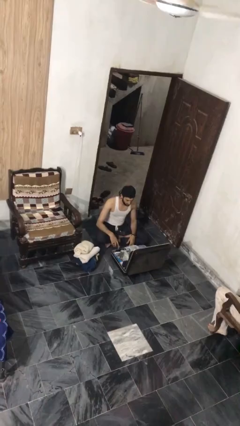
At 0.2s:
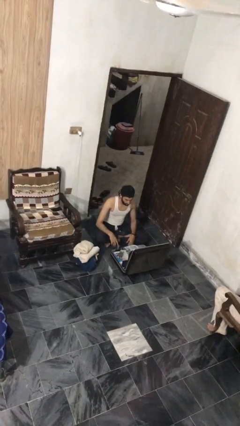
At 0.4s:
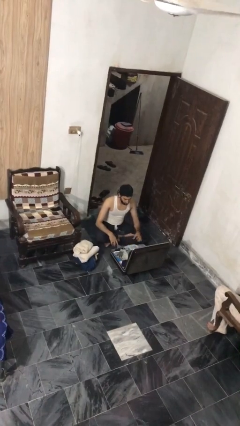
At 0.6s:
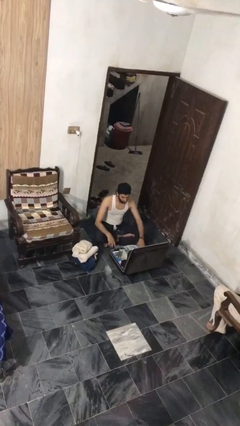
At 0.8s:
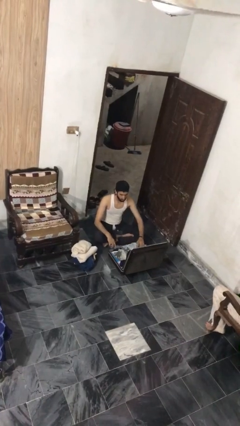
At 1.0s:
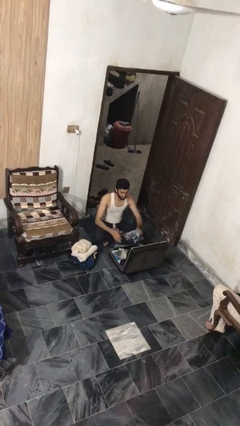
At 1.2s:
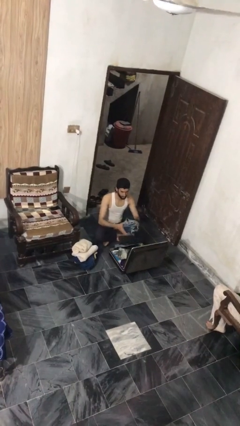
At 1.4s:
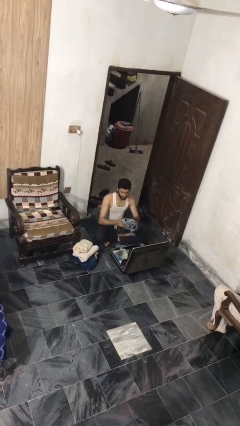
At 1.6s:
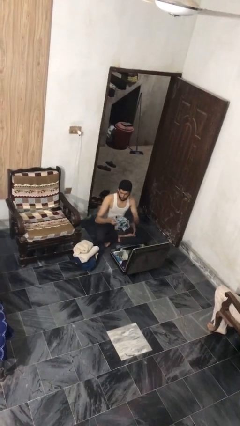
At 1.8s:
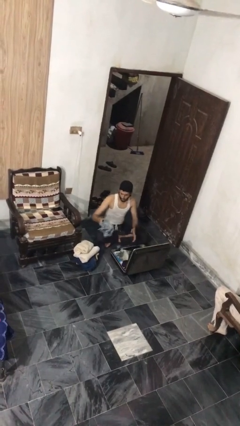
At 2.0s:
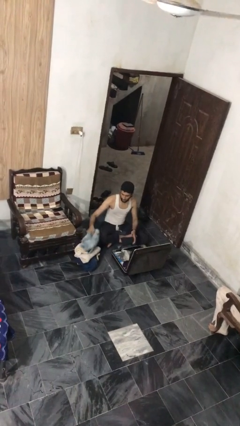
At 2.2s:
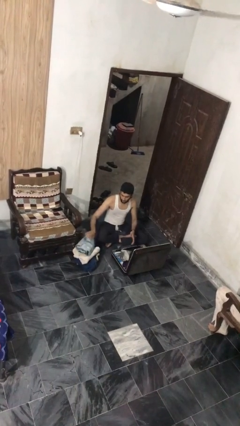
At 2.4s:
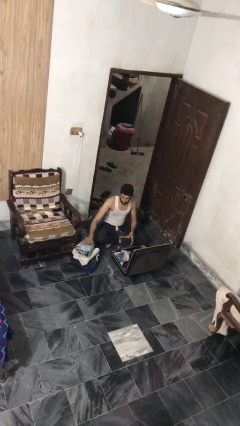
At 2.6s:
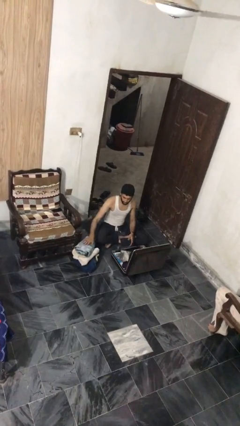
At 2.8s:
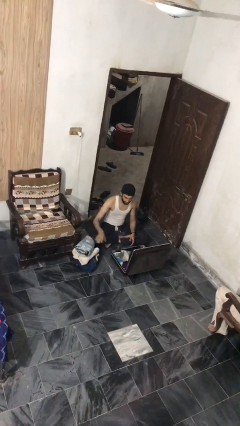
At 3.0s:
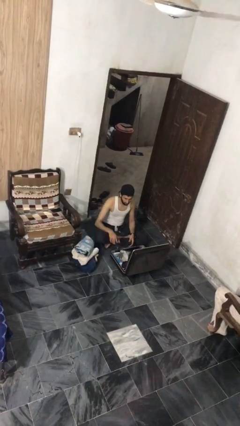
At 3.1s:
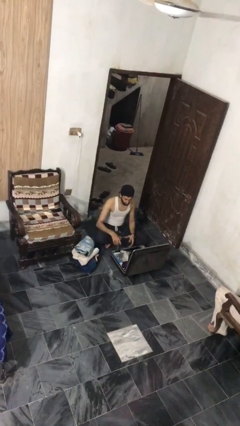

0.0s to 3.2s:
person unloads clothes from suitcase

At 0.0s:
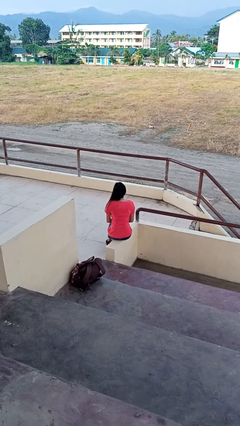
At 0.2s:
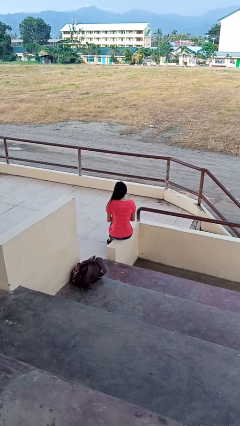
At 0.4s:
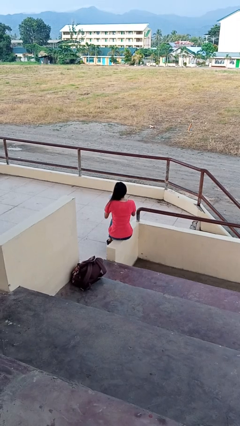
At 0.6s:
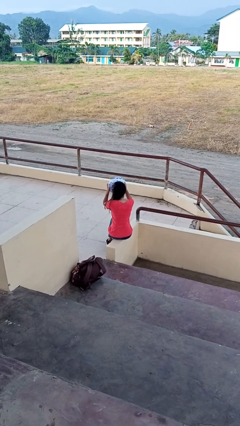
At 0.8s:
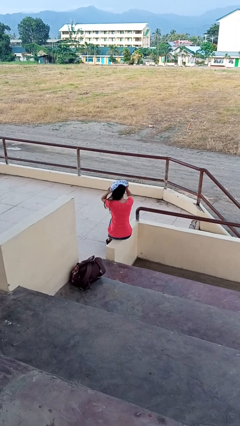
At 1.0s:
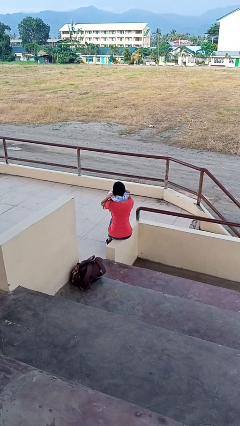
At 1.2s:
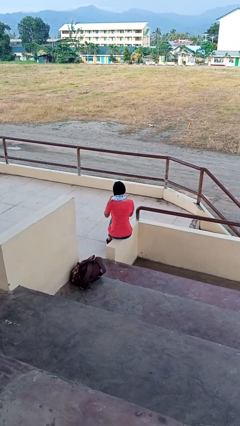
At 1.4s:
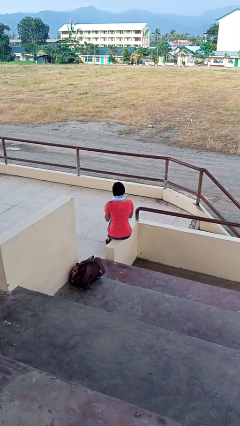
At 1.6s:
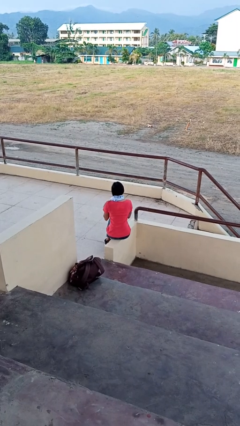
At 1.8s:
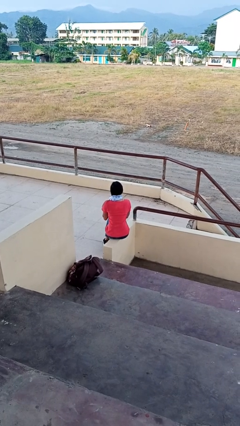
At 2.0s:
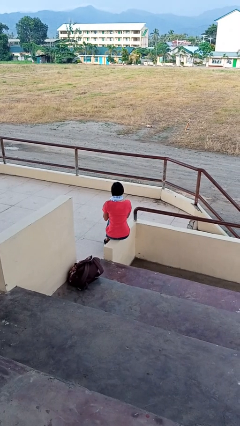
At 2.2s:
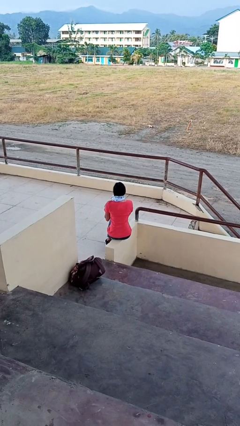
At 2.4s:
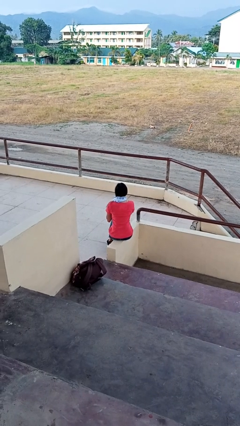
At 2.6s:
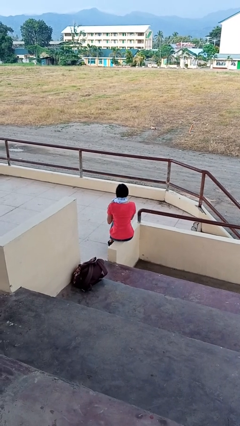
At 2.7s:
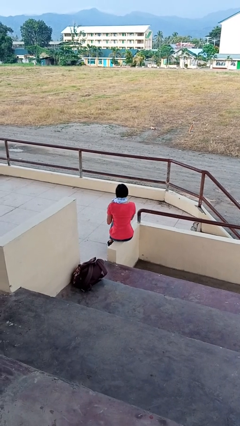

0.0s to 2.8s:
person puts on scarf

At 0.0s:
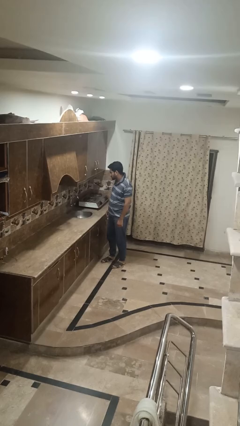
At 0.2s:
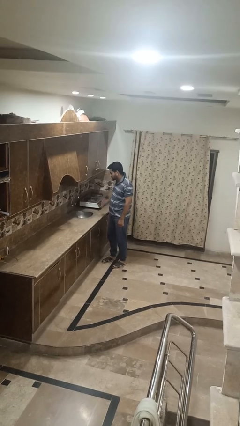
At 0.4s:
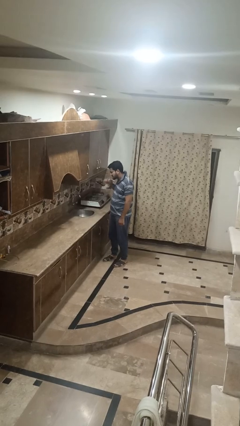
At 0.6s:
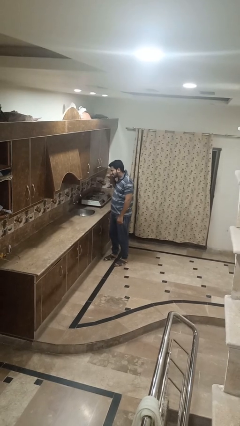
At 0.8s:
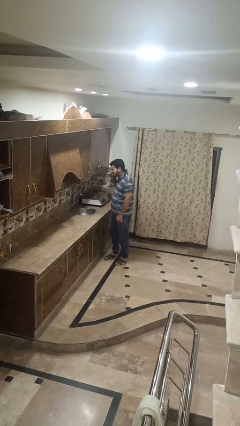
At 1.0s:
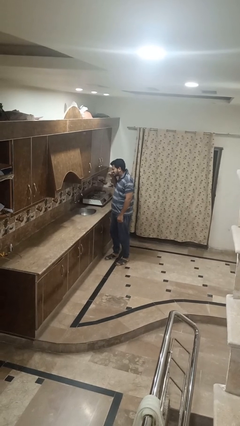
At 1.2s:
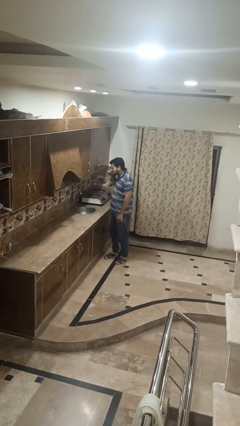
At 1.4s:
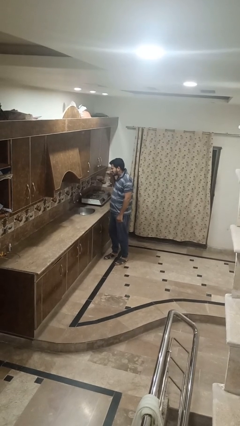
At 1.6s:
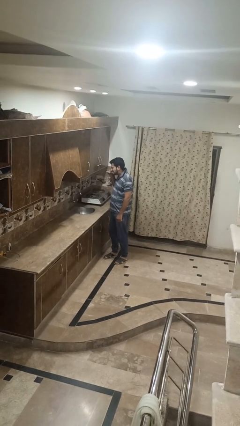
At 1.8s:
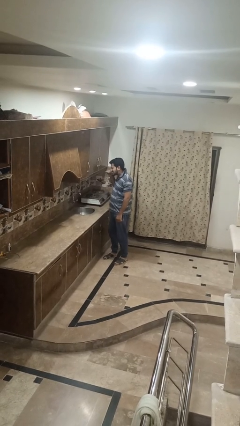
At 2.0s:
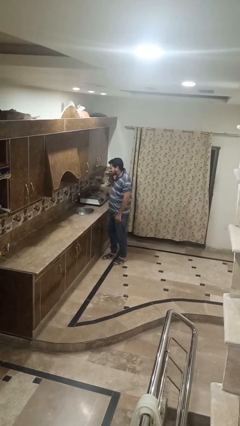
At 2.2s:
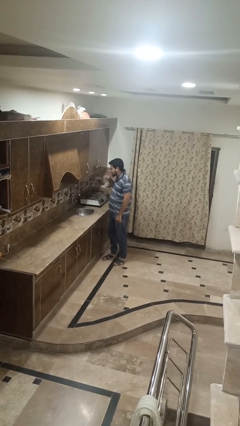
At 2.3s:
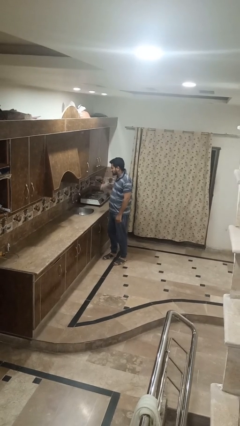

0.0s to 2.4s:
person brushes teeth

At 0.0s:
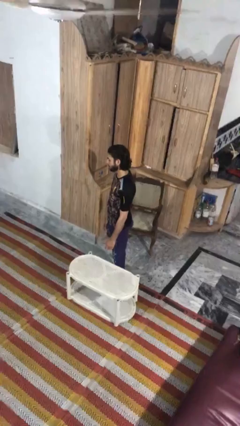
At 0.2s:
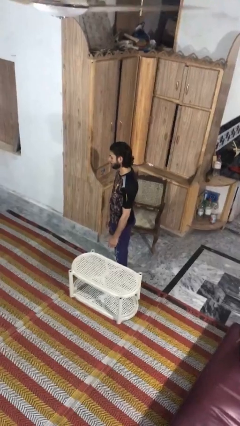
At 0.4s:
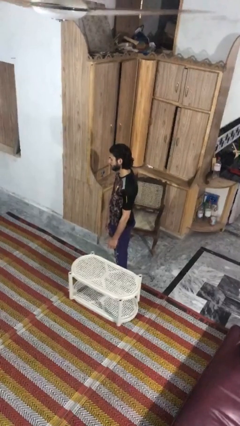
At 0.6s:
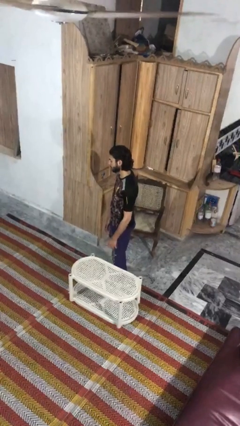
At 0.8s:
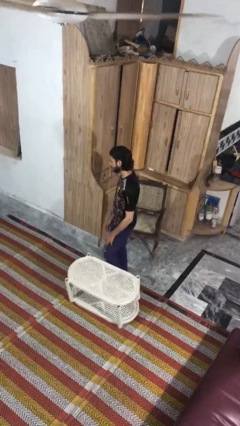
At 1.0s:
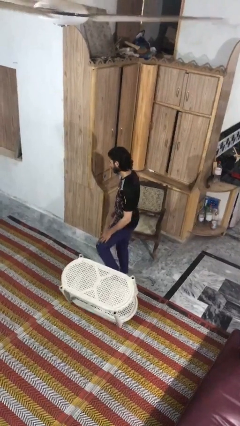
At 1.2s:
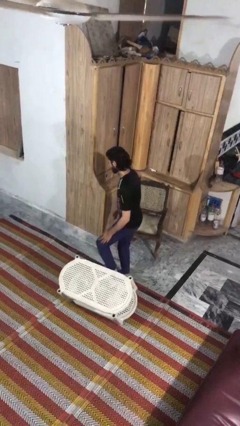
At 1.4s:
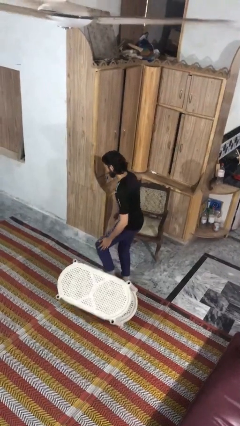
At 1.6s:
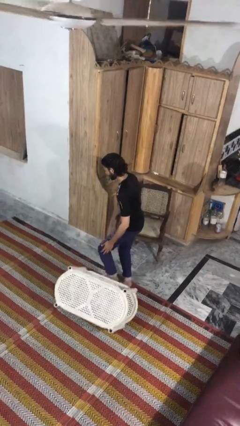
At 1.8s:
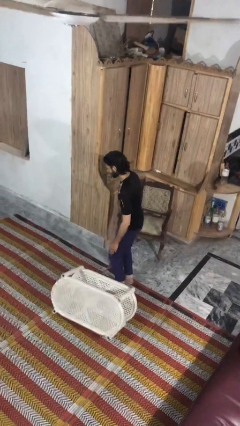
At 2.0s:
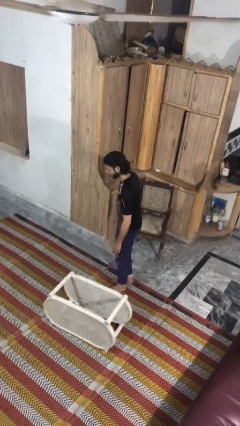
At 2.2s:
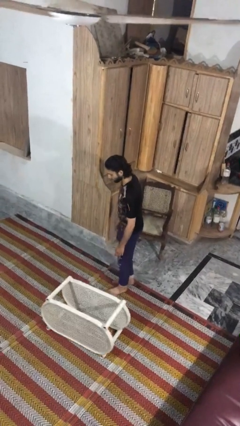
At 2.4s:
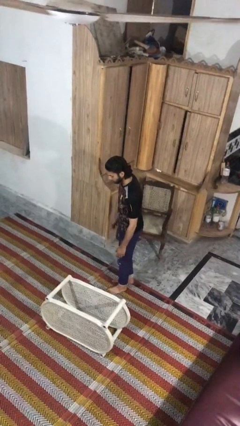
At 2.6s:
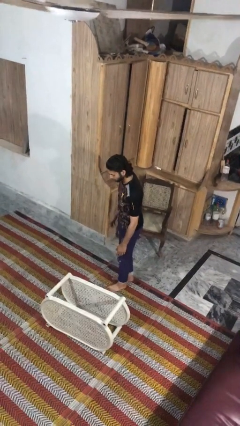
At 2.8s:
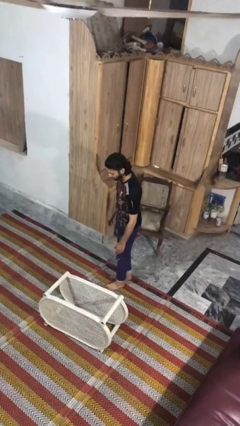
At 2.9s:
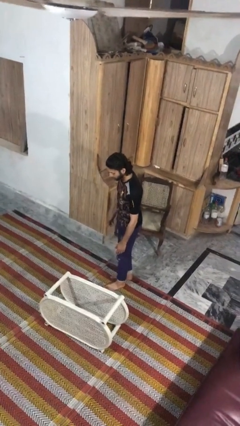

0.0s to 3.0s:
person knocks over furniture

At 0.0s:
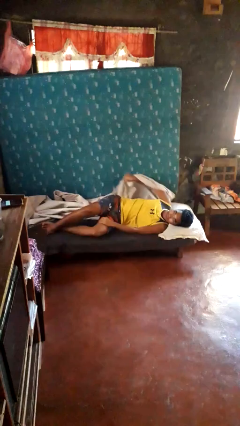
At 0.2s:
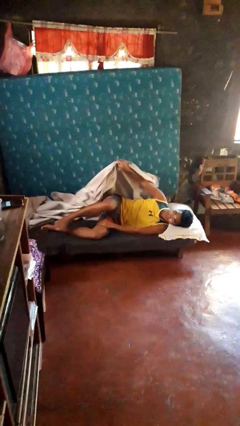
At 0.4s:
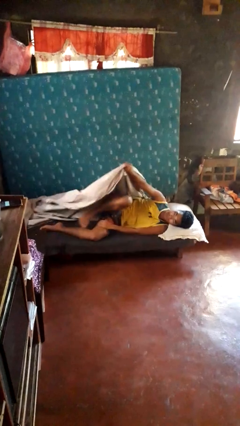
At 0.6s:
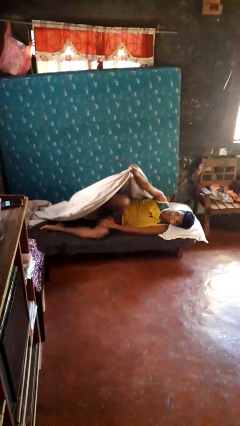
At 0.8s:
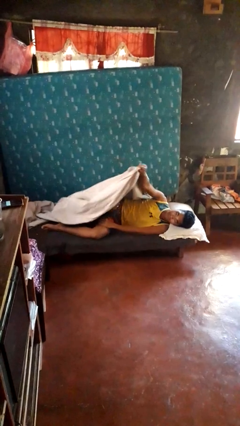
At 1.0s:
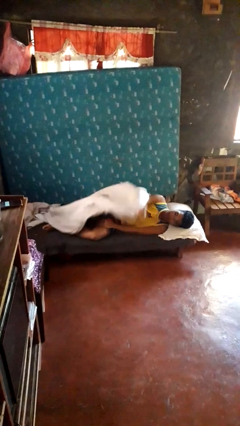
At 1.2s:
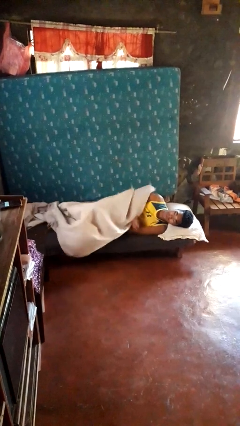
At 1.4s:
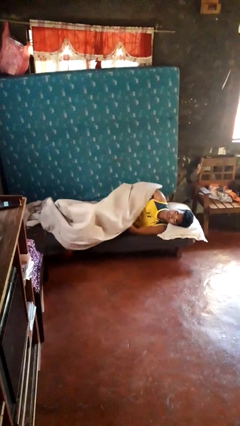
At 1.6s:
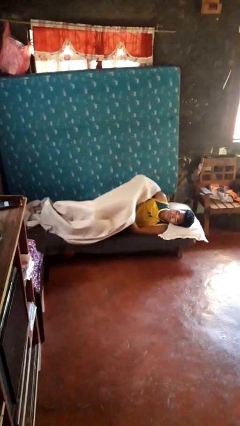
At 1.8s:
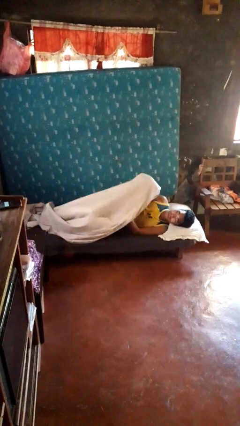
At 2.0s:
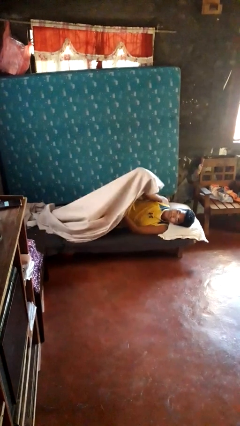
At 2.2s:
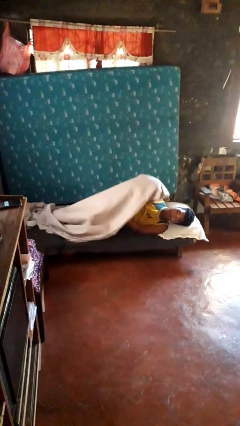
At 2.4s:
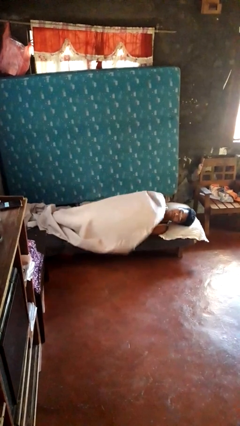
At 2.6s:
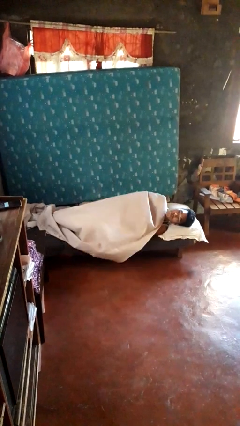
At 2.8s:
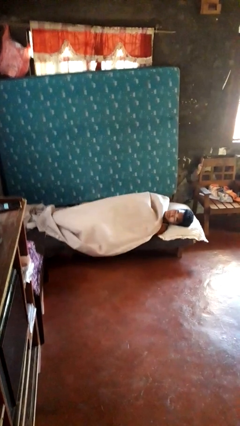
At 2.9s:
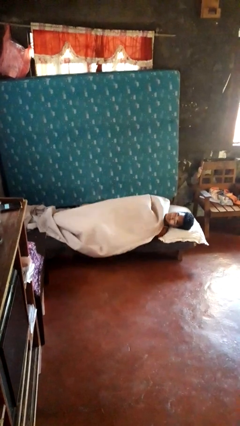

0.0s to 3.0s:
person covers with bedsheets

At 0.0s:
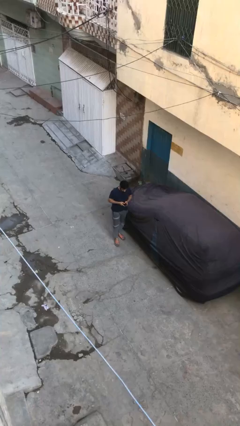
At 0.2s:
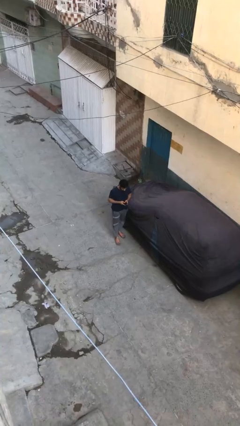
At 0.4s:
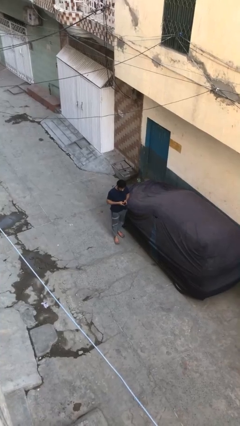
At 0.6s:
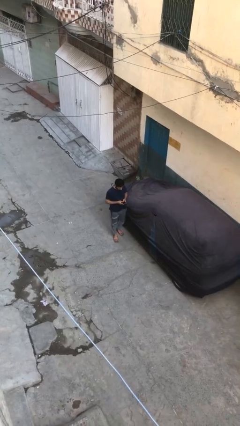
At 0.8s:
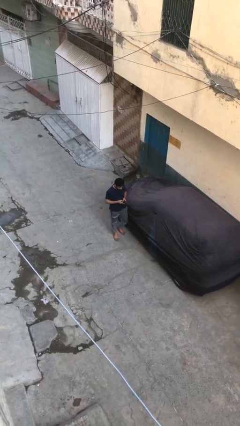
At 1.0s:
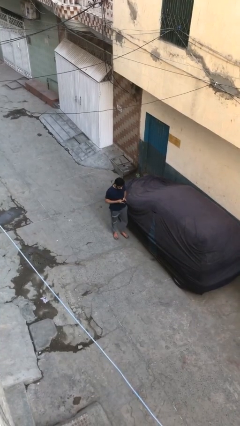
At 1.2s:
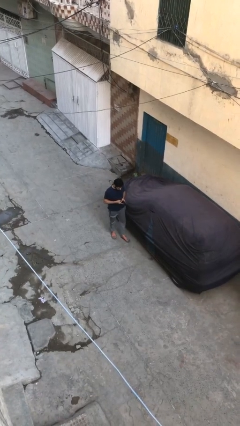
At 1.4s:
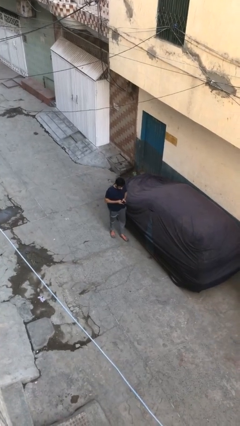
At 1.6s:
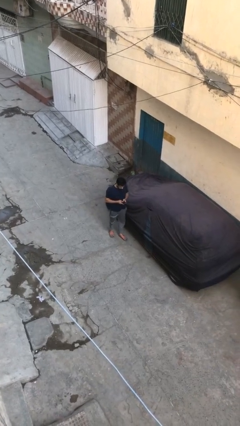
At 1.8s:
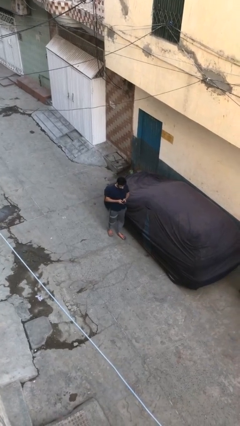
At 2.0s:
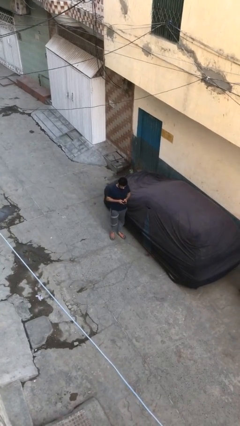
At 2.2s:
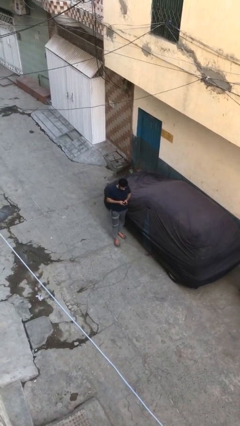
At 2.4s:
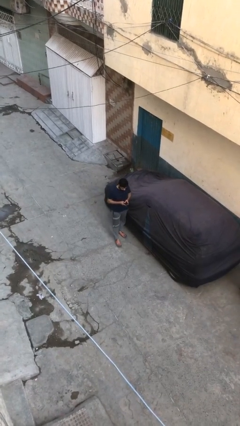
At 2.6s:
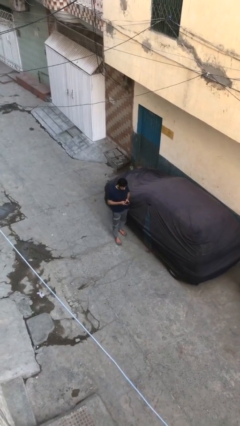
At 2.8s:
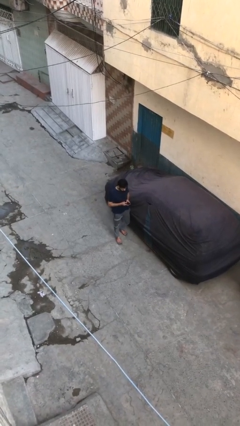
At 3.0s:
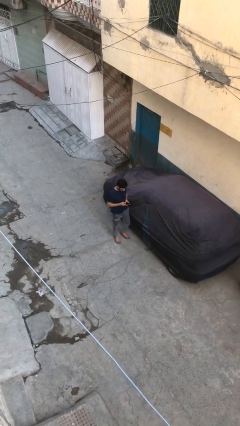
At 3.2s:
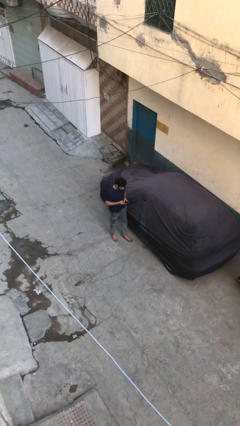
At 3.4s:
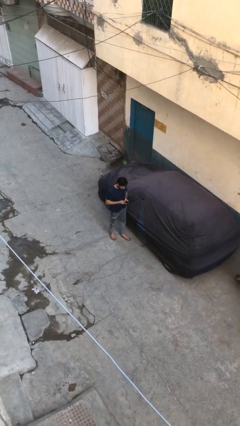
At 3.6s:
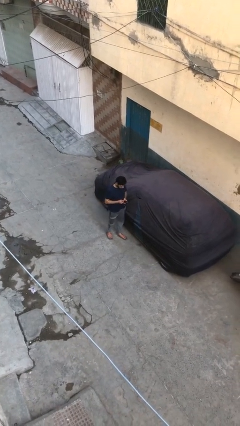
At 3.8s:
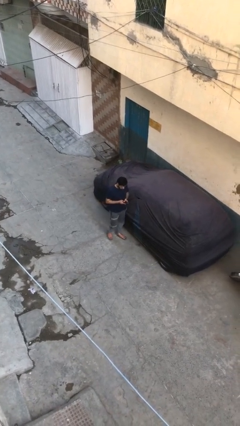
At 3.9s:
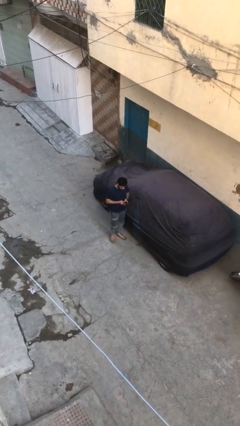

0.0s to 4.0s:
person texts on phone
